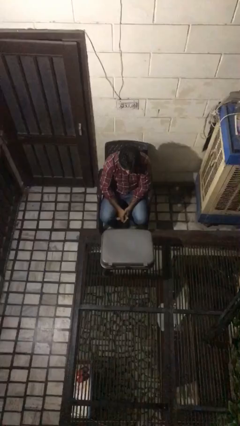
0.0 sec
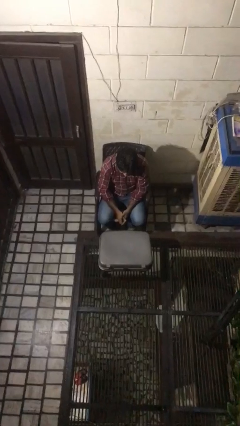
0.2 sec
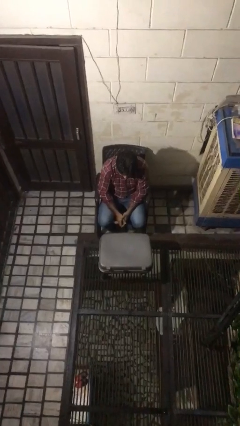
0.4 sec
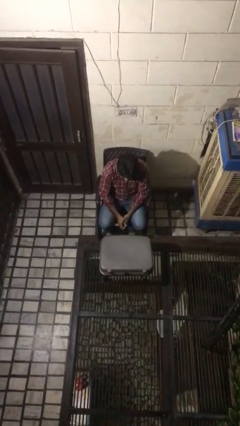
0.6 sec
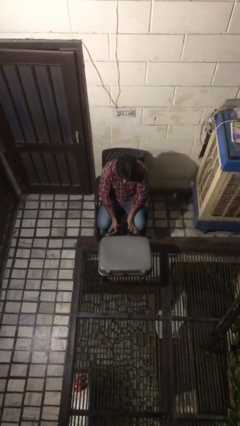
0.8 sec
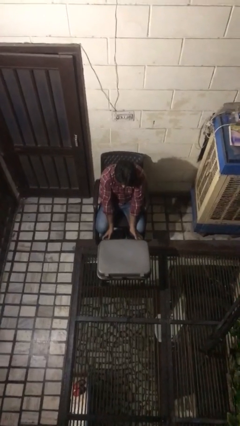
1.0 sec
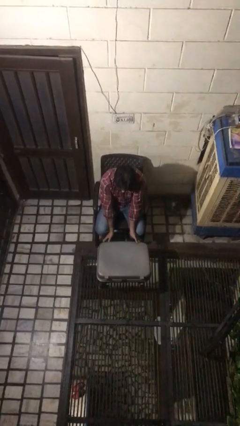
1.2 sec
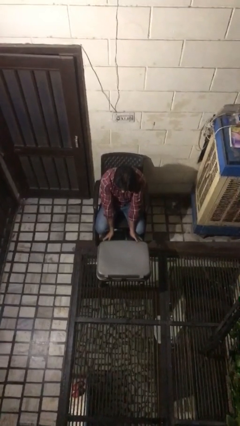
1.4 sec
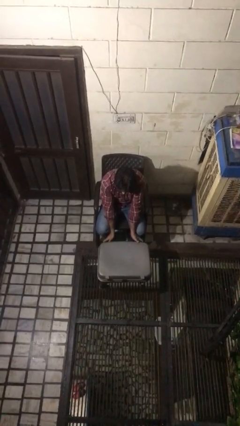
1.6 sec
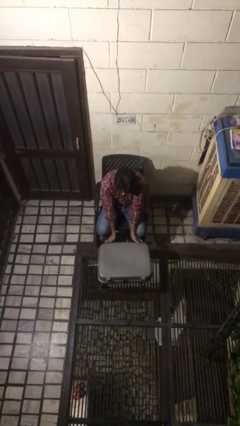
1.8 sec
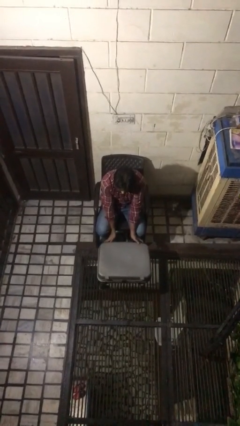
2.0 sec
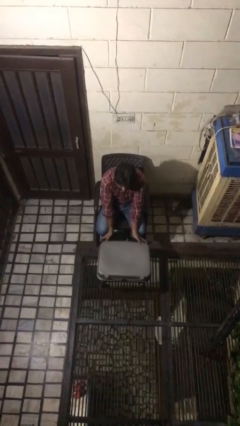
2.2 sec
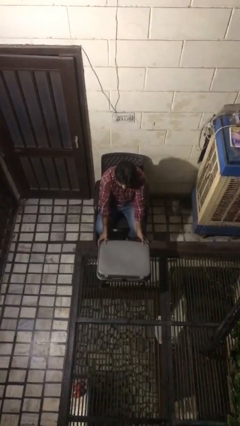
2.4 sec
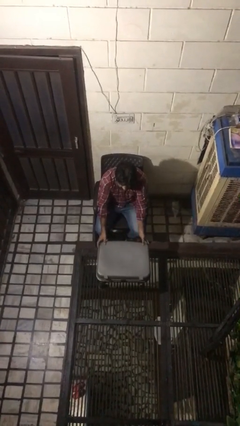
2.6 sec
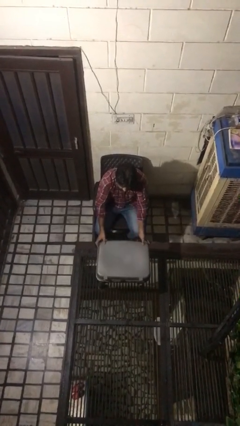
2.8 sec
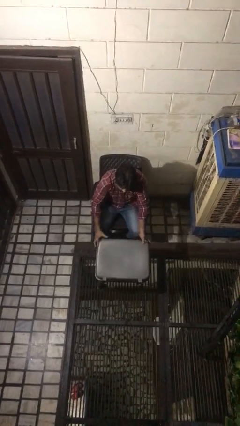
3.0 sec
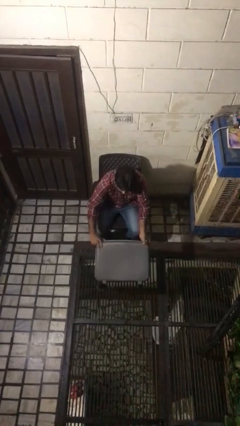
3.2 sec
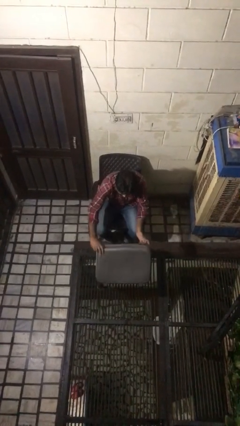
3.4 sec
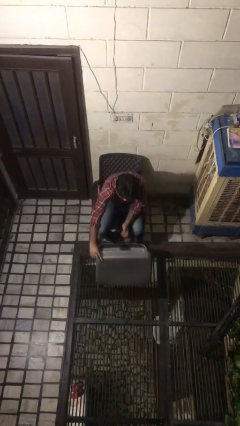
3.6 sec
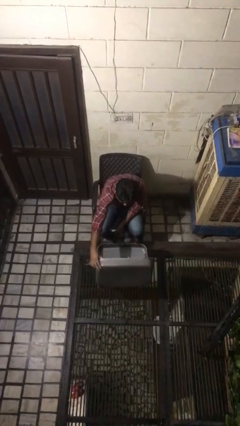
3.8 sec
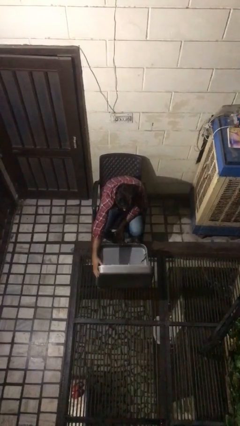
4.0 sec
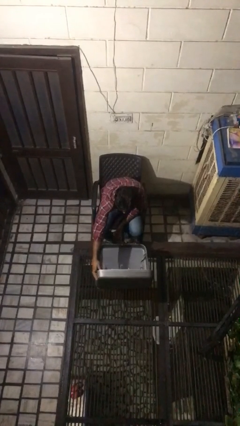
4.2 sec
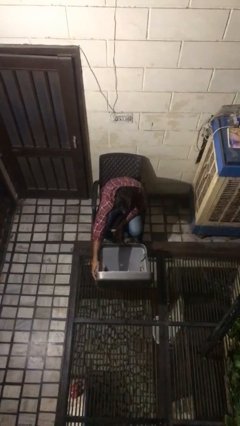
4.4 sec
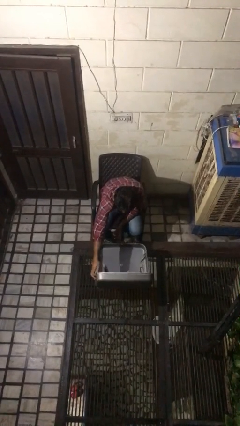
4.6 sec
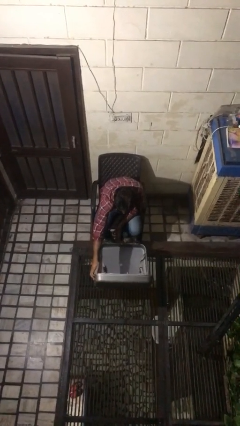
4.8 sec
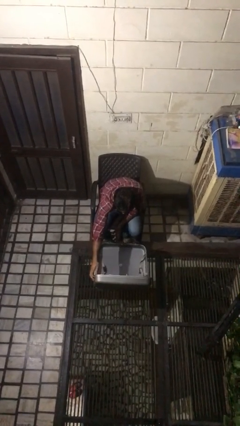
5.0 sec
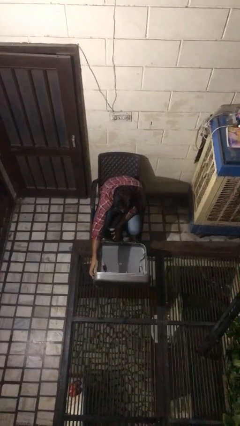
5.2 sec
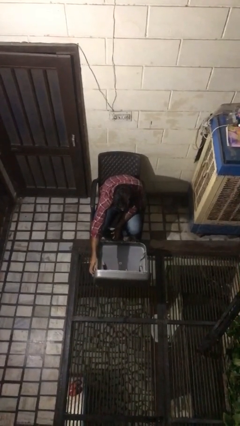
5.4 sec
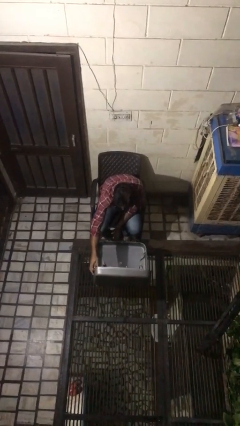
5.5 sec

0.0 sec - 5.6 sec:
person opens suitcase

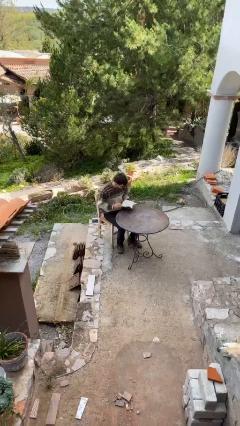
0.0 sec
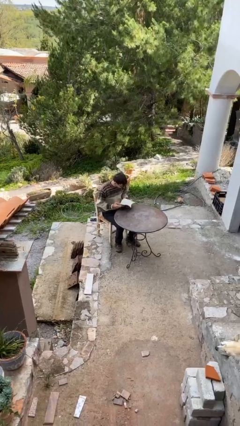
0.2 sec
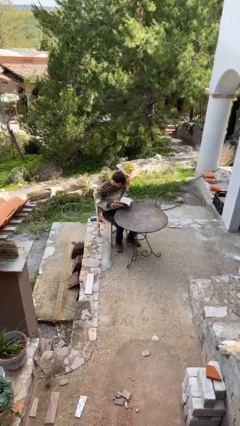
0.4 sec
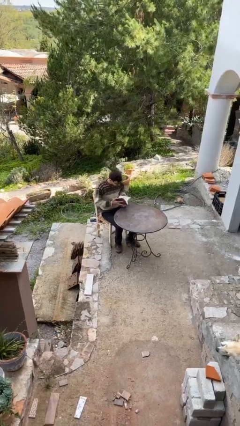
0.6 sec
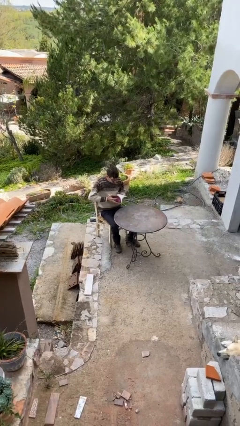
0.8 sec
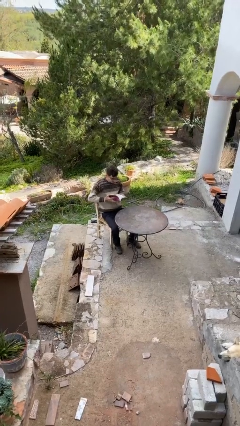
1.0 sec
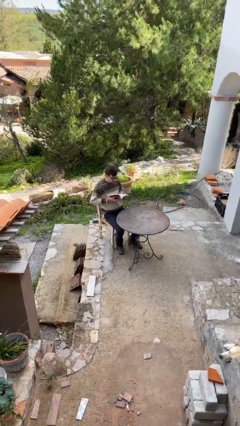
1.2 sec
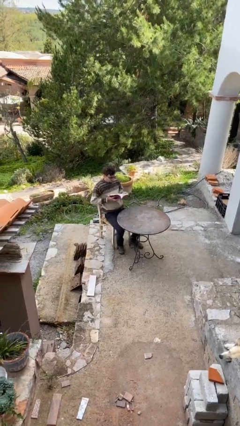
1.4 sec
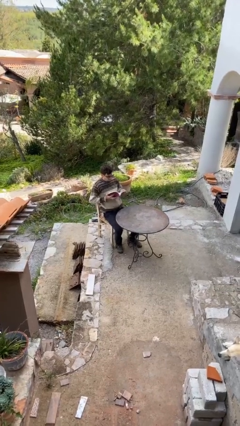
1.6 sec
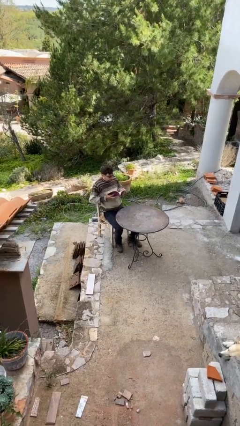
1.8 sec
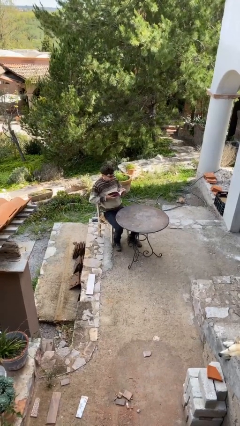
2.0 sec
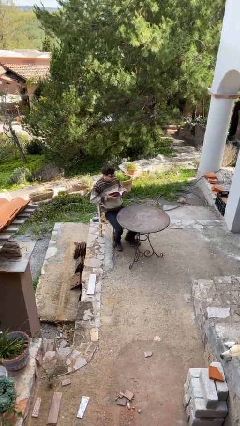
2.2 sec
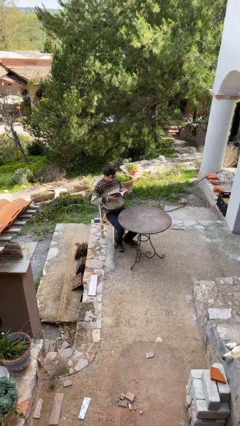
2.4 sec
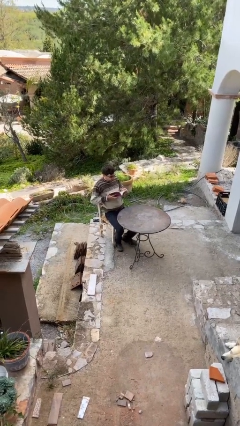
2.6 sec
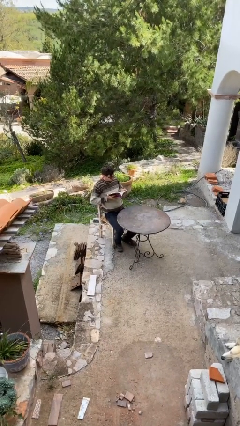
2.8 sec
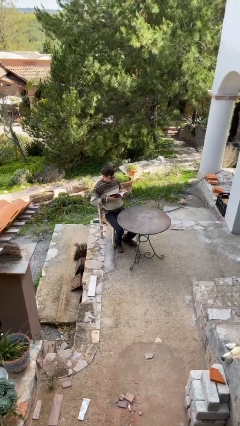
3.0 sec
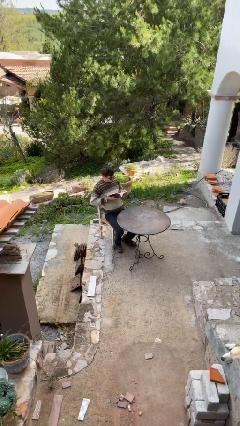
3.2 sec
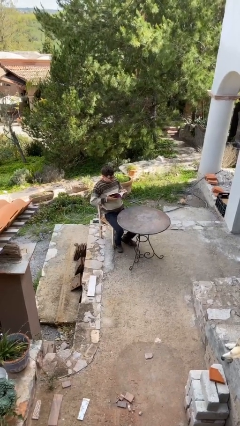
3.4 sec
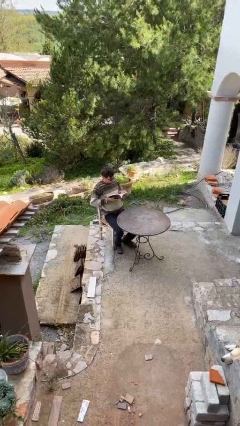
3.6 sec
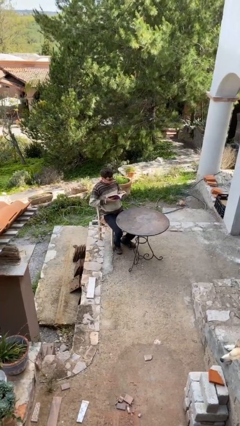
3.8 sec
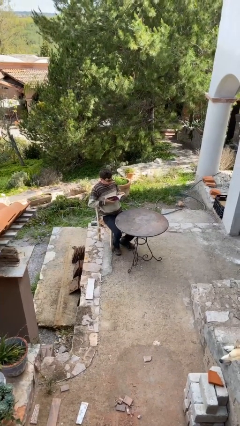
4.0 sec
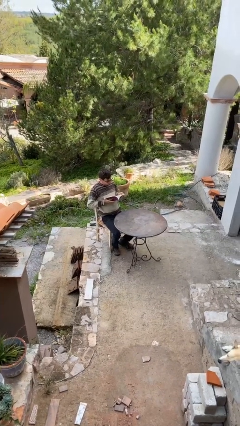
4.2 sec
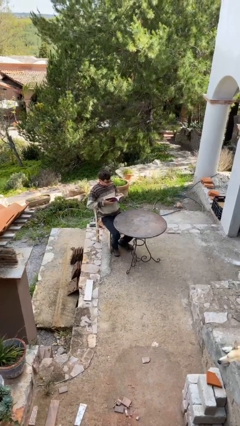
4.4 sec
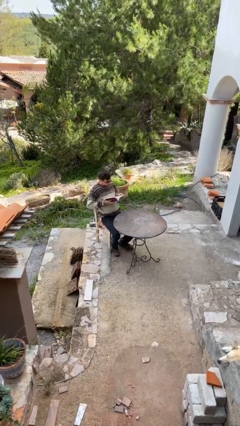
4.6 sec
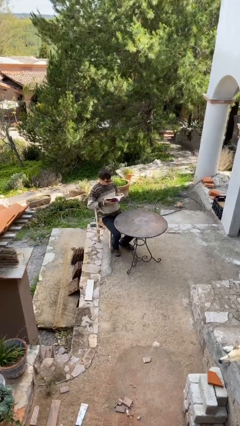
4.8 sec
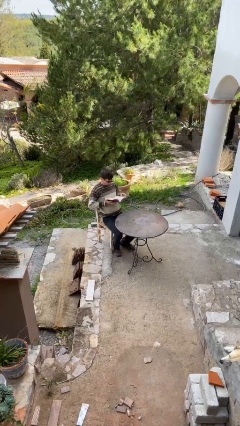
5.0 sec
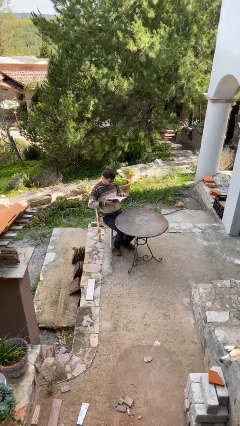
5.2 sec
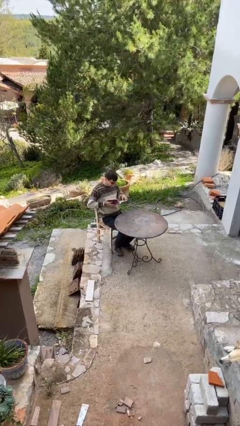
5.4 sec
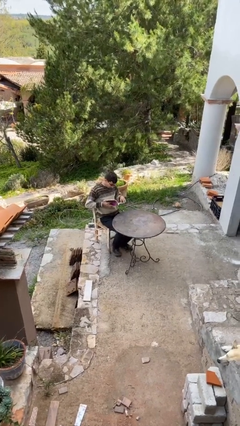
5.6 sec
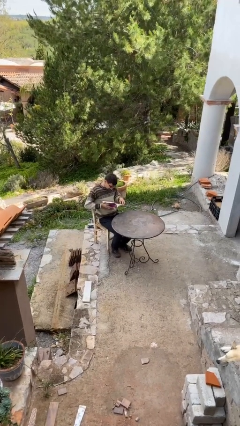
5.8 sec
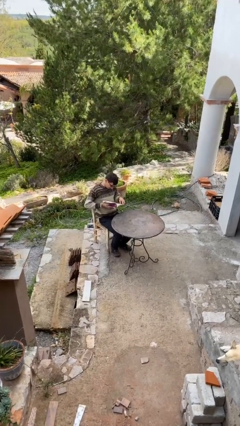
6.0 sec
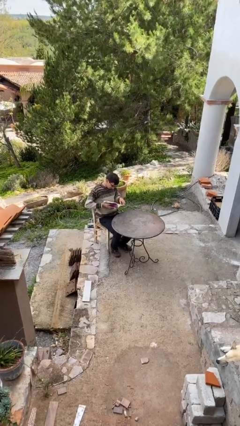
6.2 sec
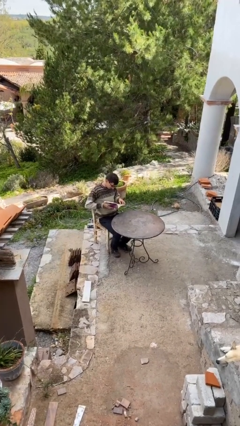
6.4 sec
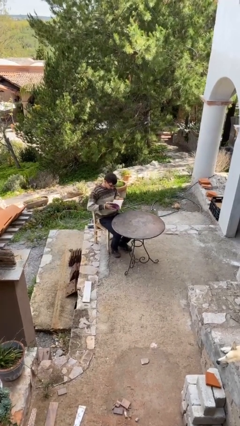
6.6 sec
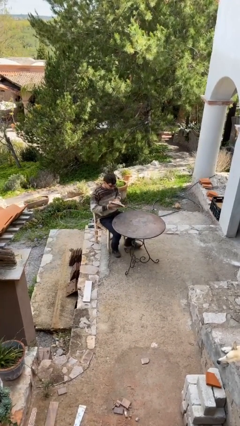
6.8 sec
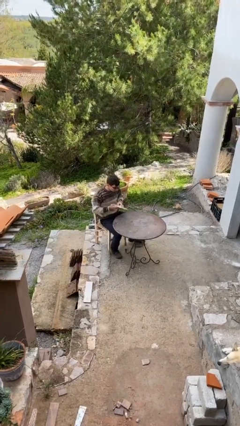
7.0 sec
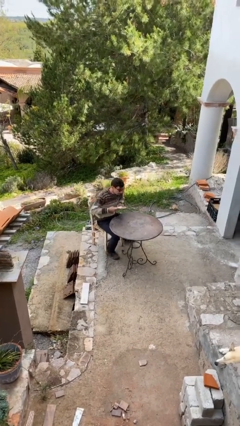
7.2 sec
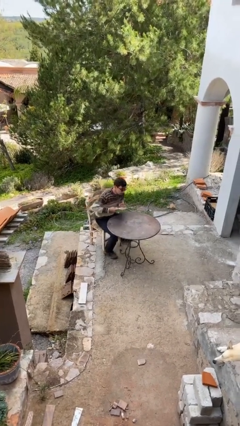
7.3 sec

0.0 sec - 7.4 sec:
person reads document

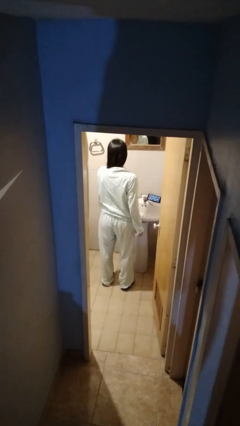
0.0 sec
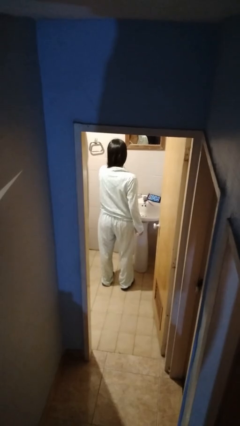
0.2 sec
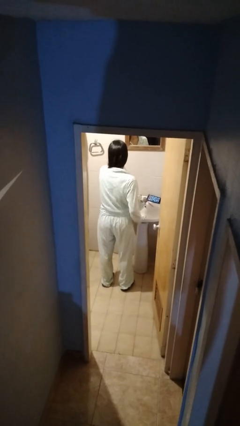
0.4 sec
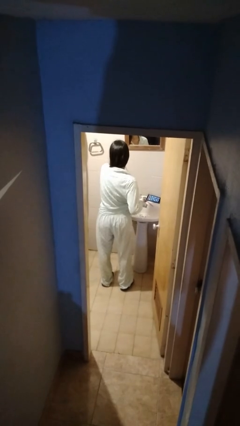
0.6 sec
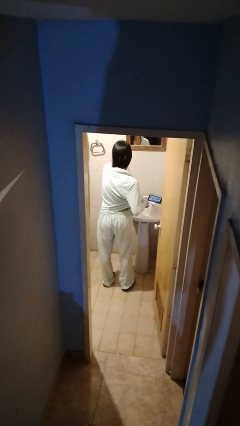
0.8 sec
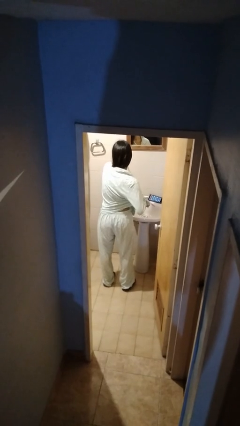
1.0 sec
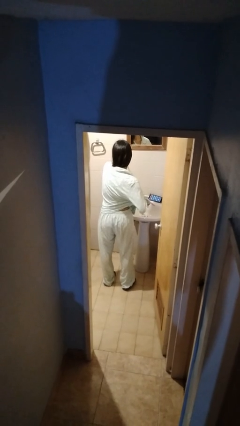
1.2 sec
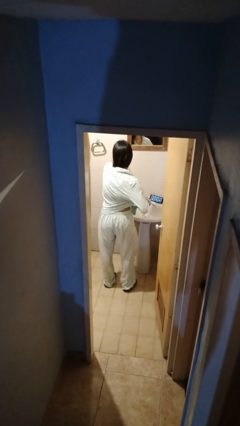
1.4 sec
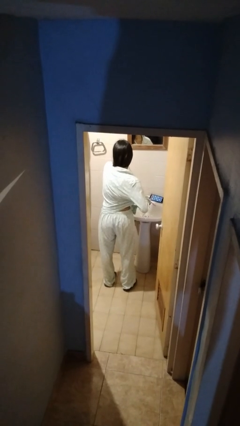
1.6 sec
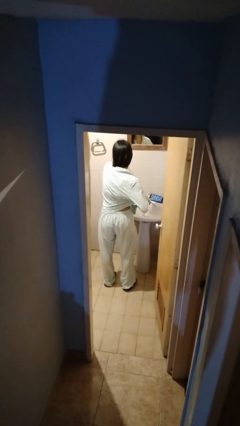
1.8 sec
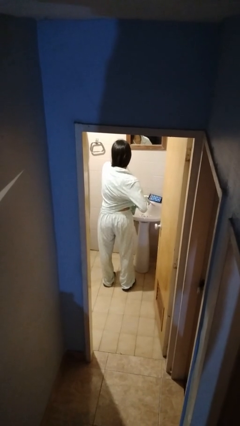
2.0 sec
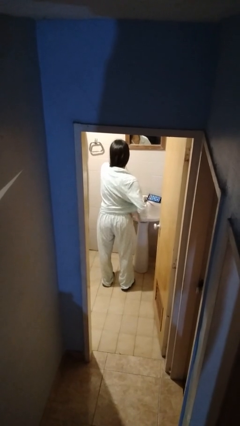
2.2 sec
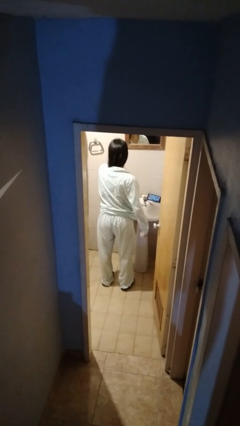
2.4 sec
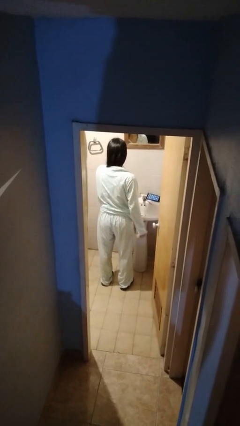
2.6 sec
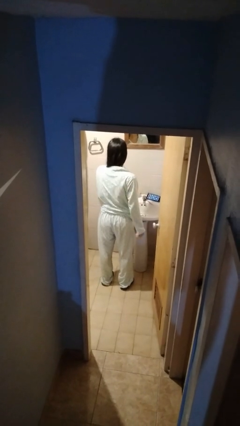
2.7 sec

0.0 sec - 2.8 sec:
person applies deodorant

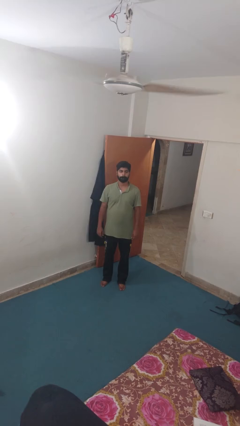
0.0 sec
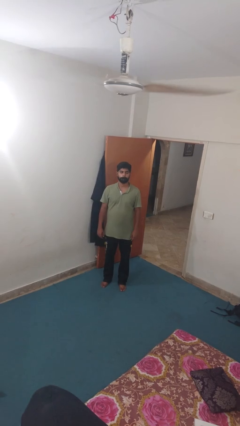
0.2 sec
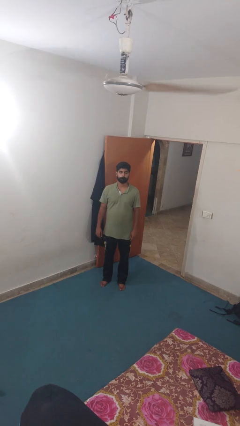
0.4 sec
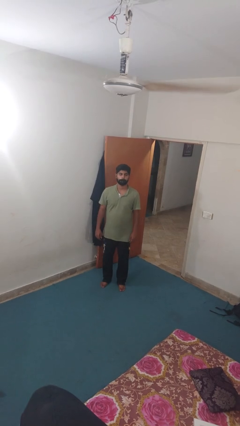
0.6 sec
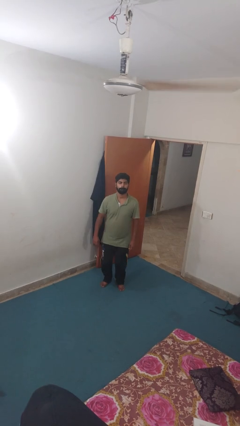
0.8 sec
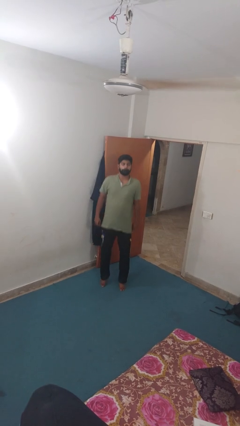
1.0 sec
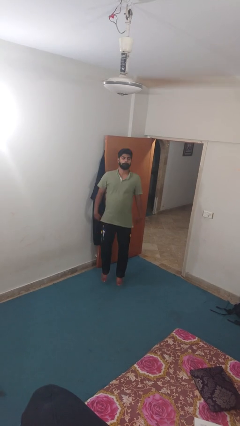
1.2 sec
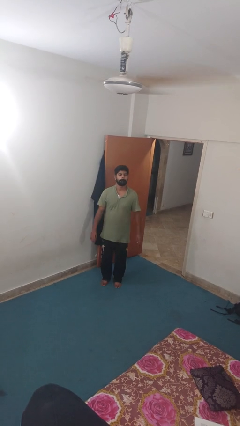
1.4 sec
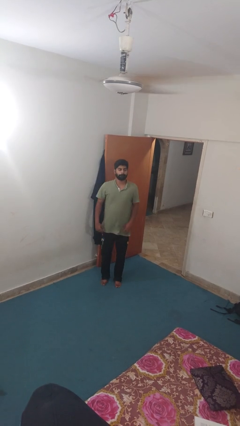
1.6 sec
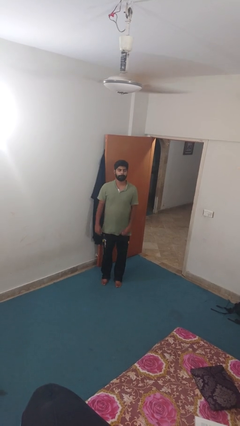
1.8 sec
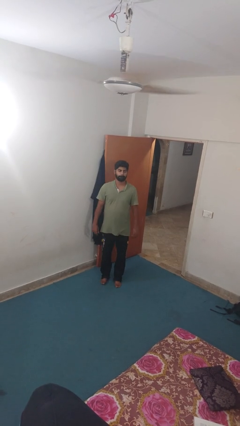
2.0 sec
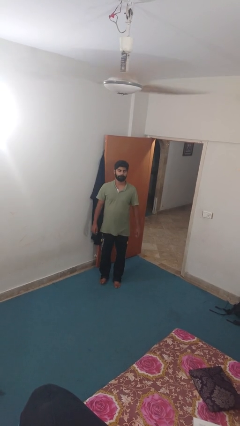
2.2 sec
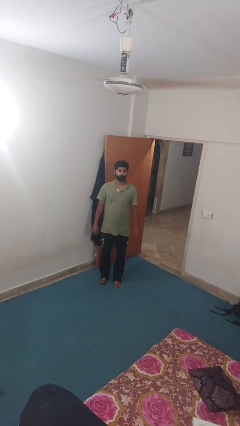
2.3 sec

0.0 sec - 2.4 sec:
person jumps
